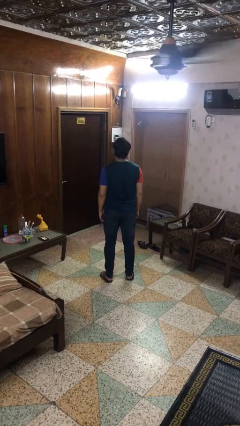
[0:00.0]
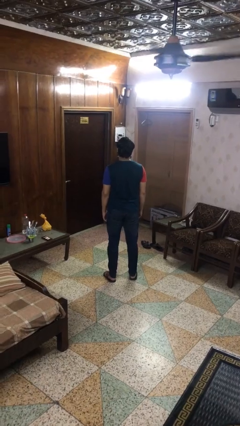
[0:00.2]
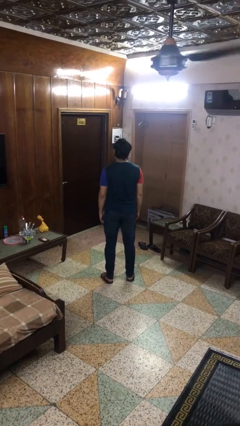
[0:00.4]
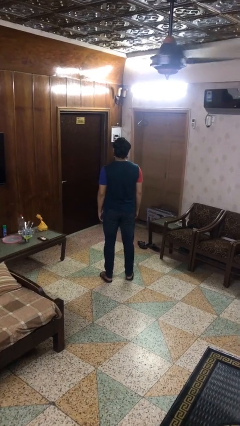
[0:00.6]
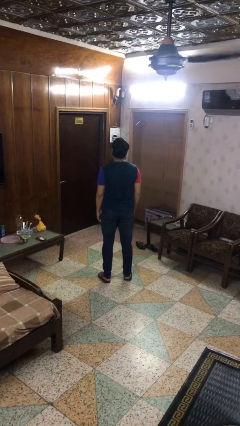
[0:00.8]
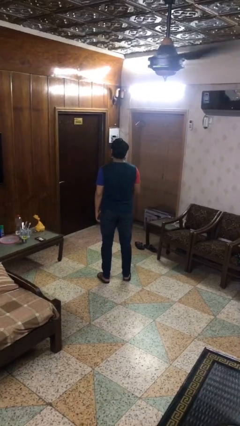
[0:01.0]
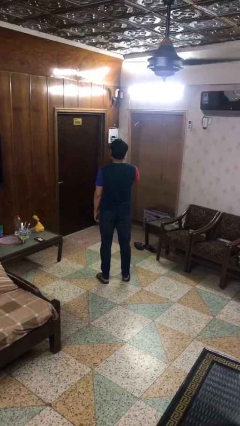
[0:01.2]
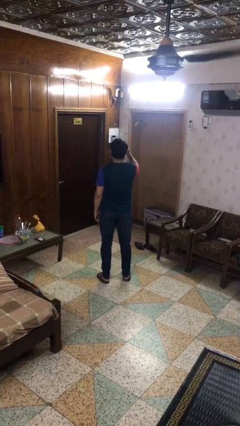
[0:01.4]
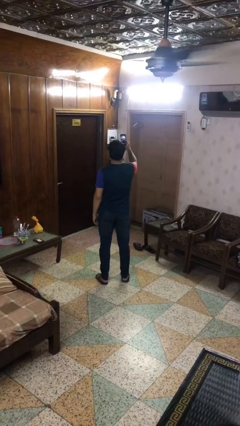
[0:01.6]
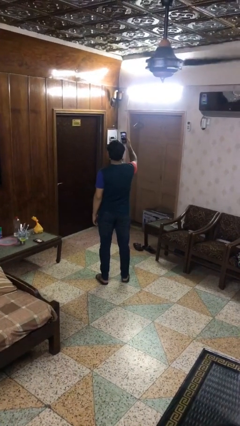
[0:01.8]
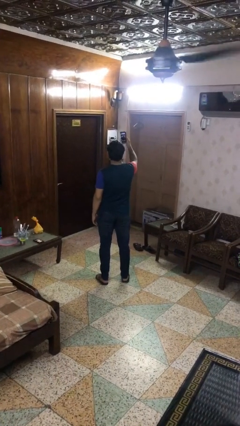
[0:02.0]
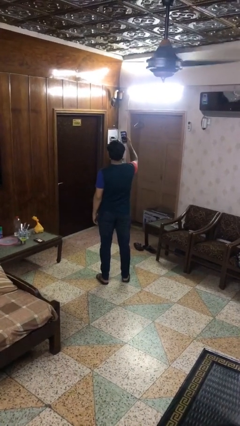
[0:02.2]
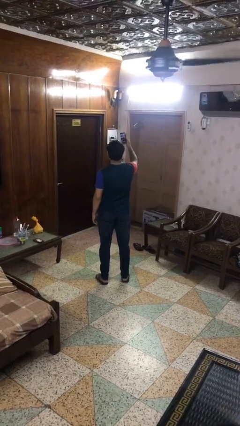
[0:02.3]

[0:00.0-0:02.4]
person takes selfie

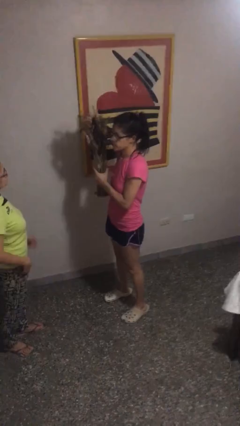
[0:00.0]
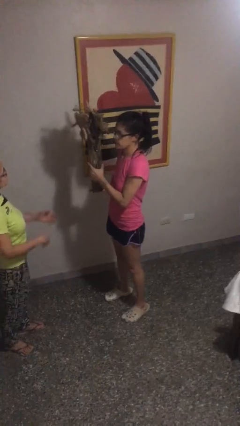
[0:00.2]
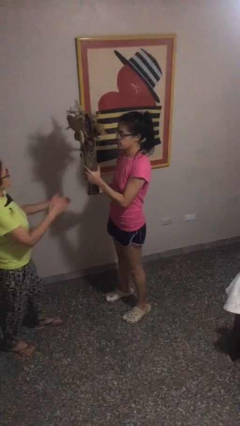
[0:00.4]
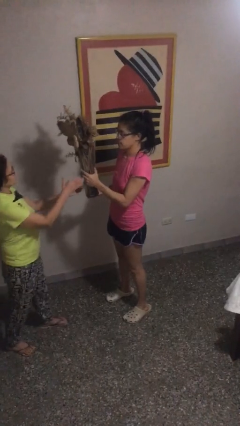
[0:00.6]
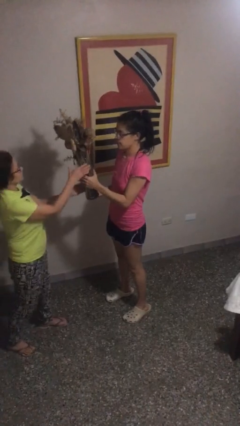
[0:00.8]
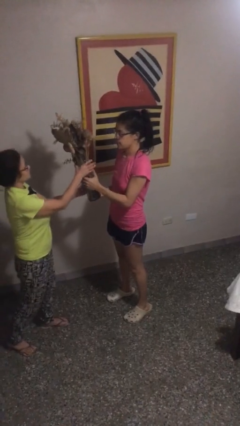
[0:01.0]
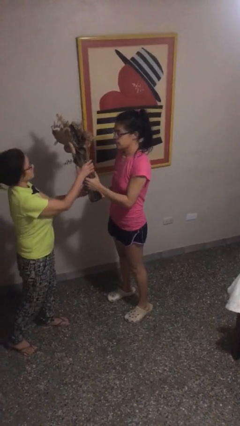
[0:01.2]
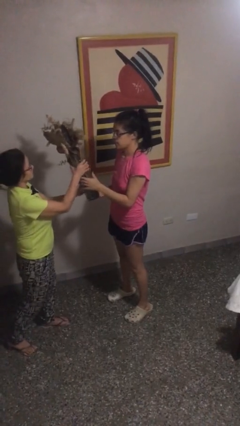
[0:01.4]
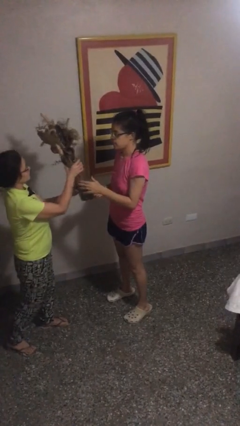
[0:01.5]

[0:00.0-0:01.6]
person transfers object to person

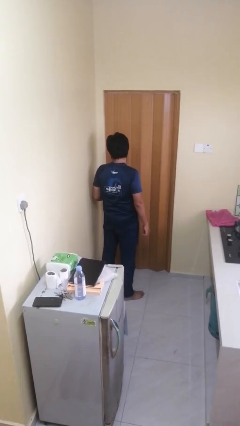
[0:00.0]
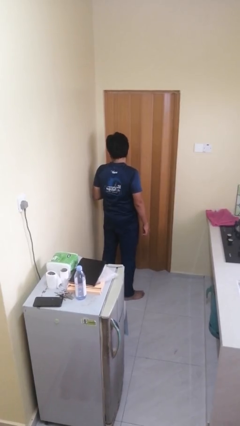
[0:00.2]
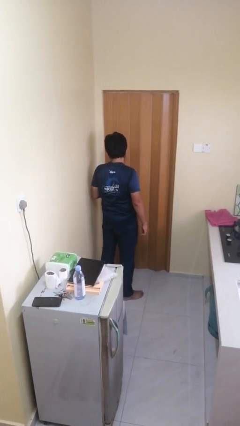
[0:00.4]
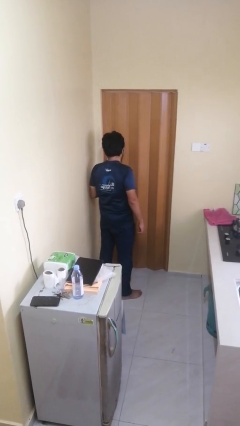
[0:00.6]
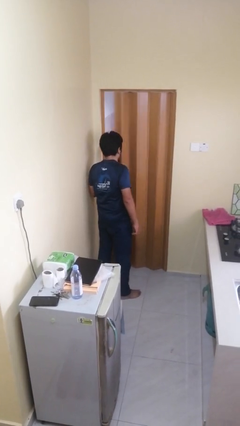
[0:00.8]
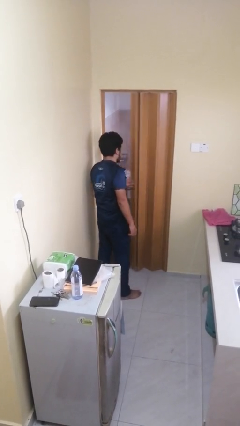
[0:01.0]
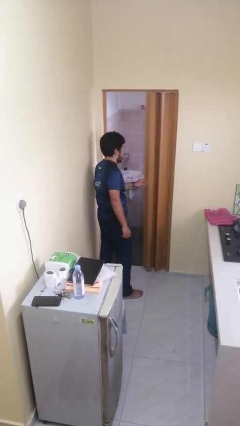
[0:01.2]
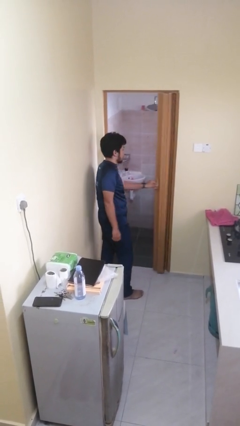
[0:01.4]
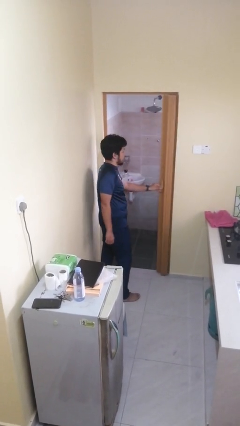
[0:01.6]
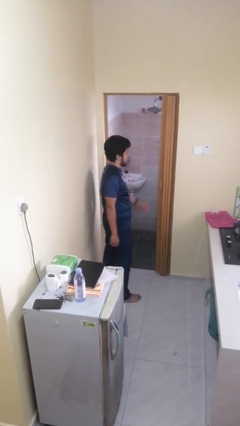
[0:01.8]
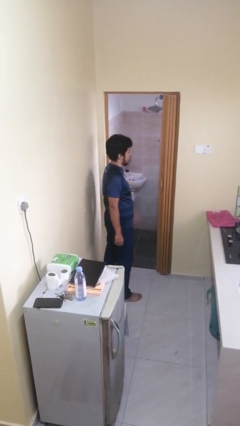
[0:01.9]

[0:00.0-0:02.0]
person opens sliding door

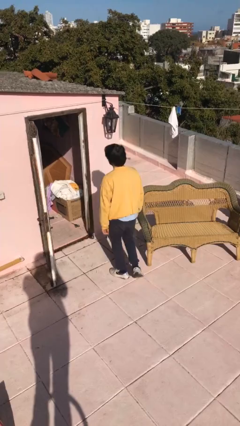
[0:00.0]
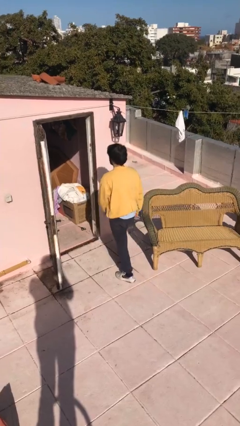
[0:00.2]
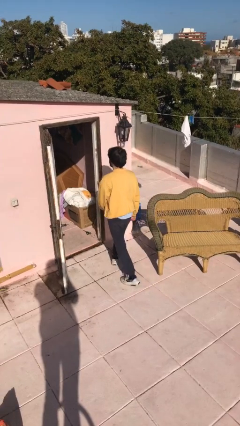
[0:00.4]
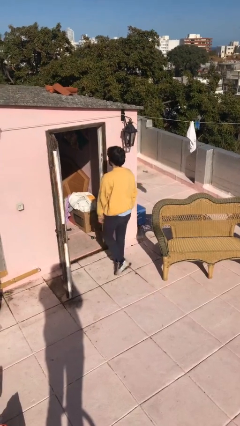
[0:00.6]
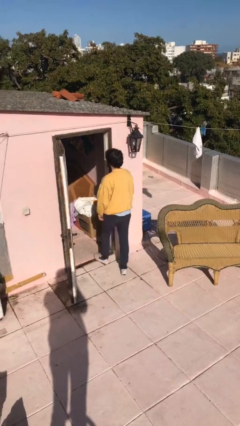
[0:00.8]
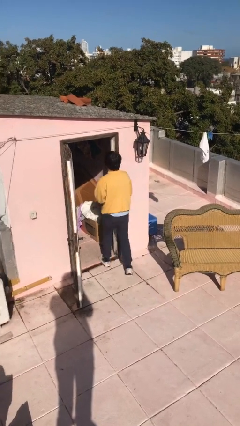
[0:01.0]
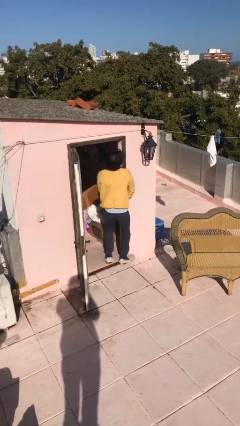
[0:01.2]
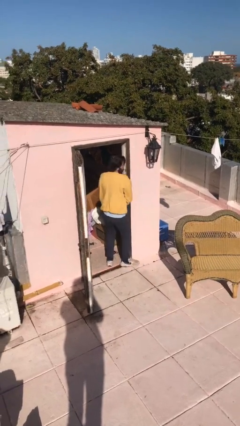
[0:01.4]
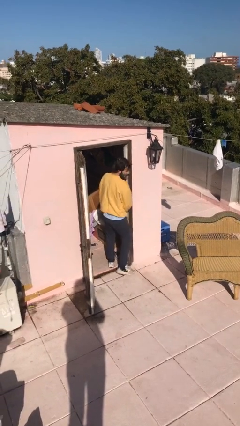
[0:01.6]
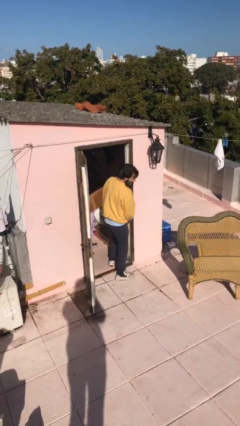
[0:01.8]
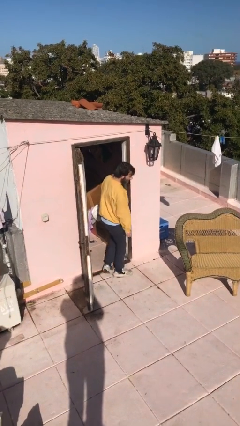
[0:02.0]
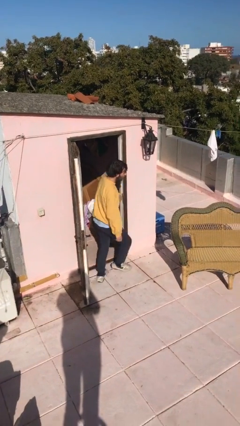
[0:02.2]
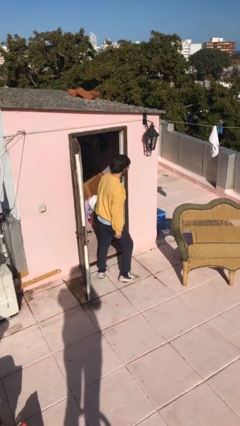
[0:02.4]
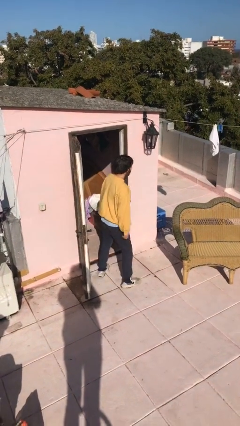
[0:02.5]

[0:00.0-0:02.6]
person bumps into wall

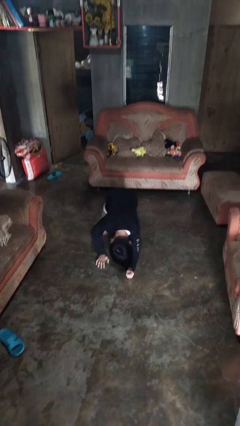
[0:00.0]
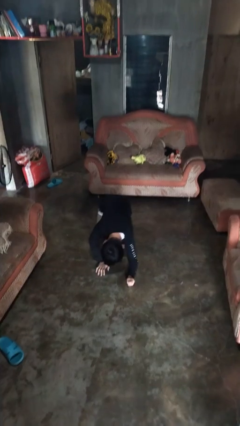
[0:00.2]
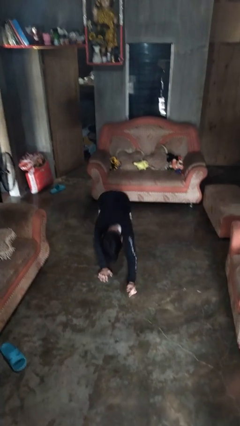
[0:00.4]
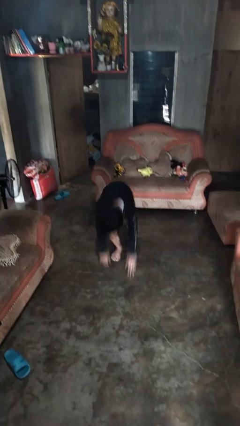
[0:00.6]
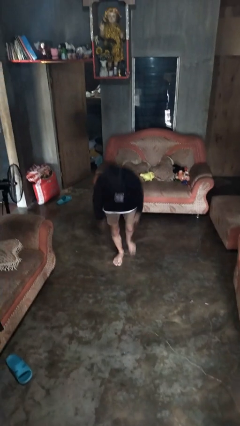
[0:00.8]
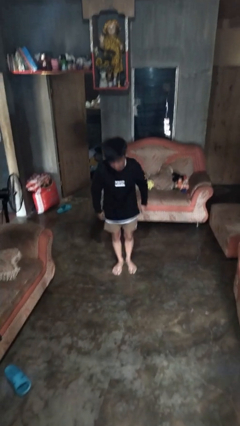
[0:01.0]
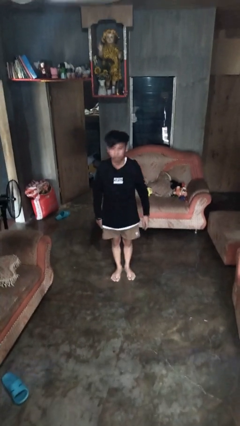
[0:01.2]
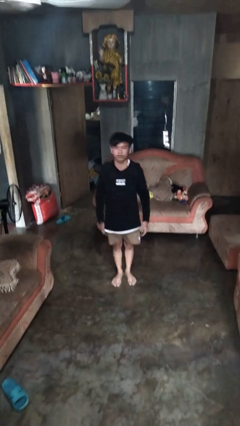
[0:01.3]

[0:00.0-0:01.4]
person stands up from floor

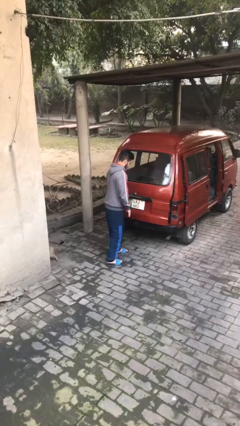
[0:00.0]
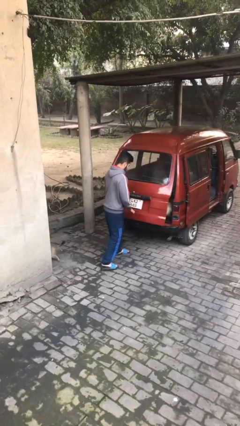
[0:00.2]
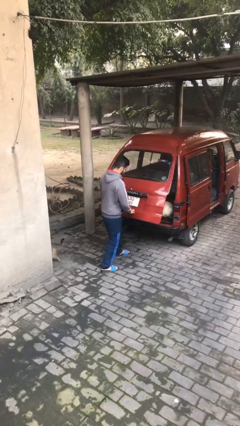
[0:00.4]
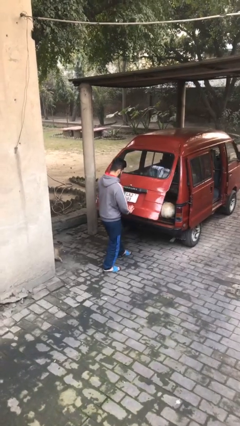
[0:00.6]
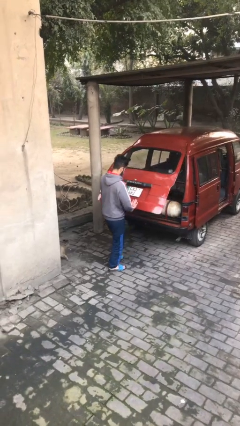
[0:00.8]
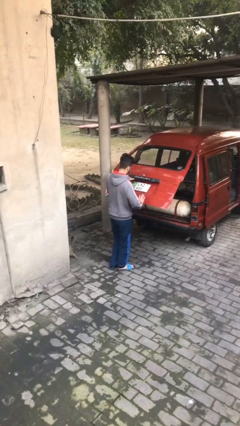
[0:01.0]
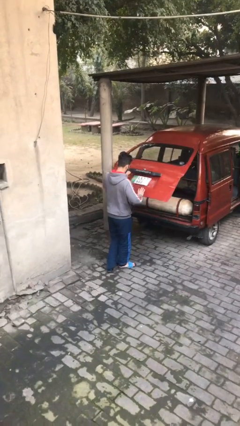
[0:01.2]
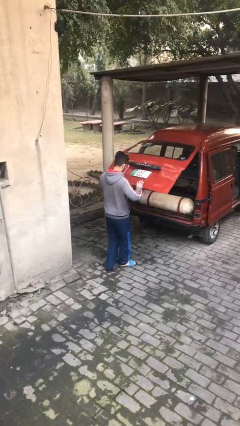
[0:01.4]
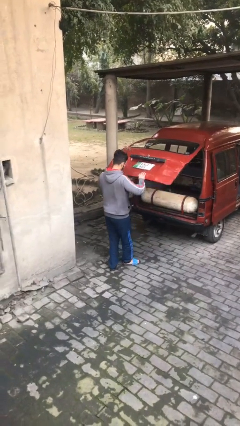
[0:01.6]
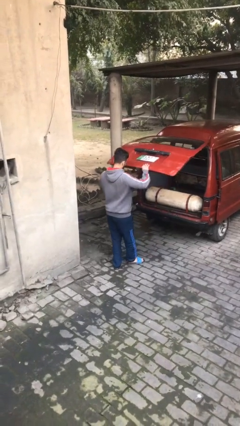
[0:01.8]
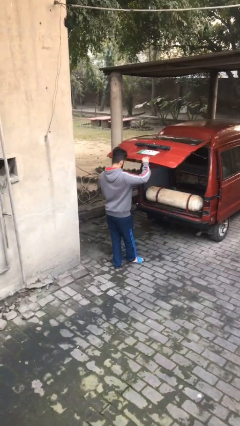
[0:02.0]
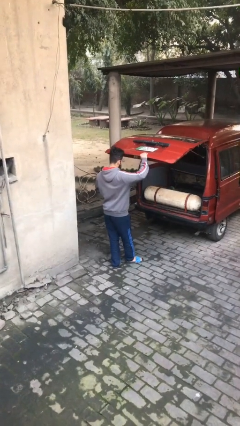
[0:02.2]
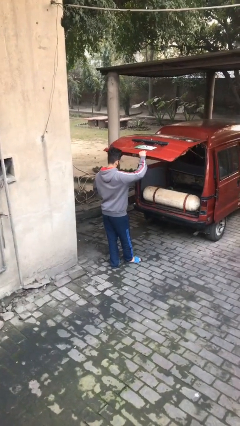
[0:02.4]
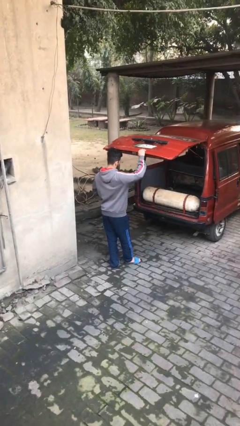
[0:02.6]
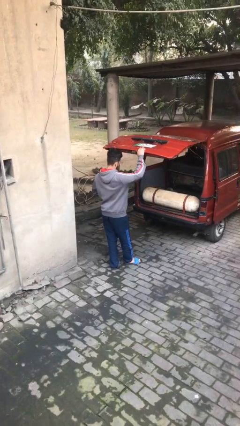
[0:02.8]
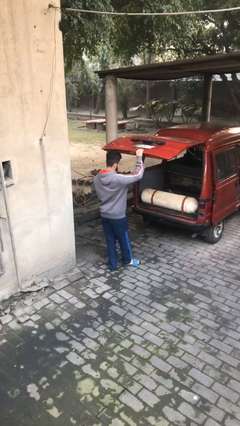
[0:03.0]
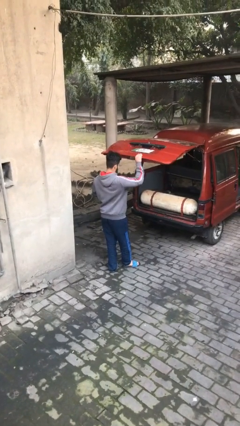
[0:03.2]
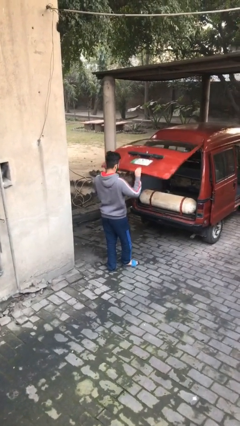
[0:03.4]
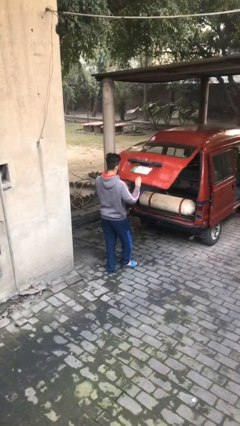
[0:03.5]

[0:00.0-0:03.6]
person opens car trunk

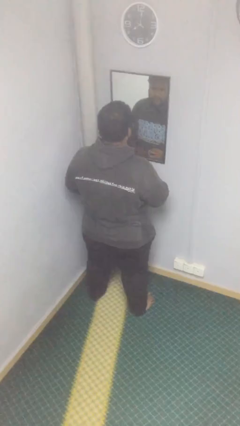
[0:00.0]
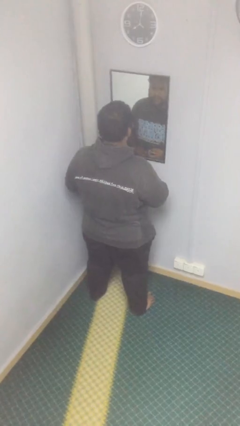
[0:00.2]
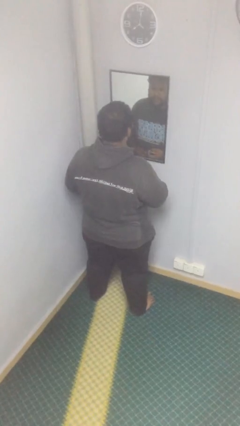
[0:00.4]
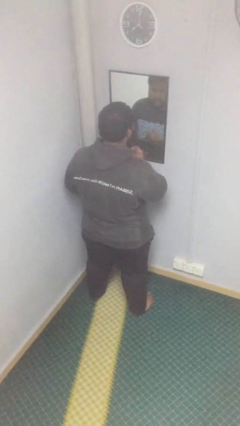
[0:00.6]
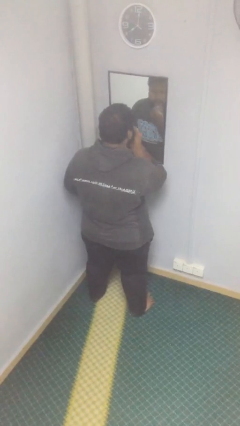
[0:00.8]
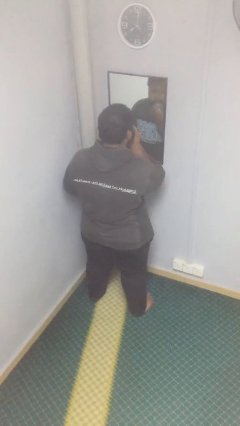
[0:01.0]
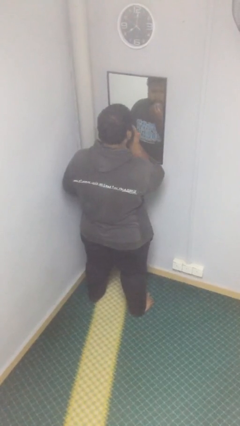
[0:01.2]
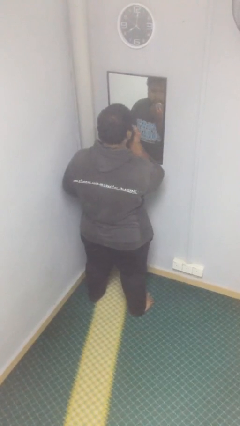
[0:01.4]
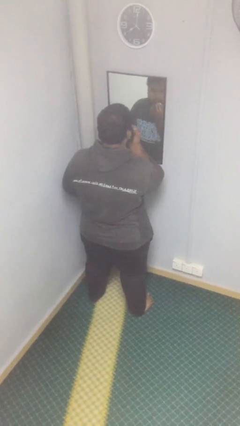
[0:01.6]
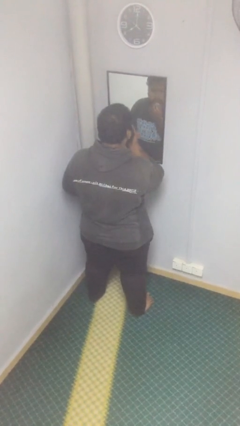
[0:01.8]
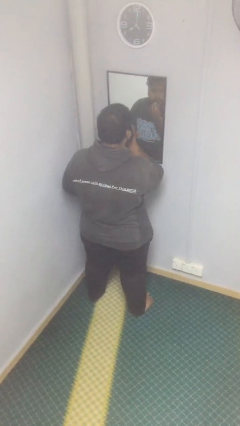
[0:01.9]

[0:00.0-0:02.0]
person applies lip makeup

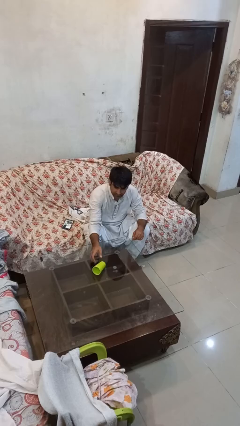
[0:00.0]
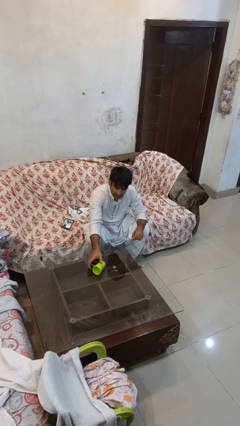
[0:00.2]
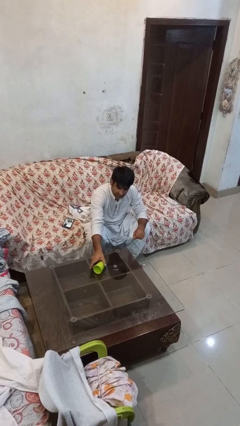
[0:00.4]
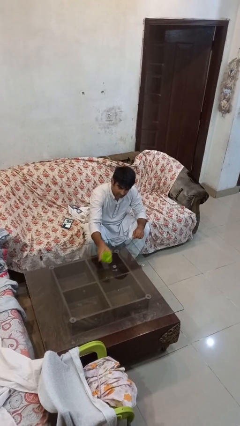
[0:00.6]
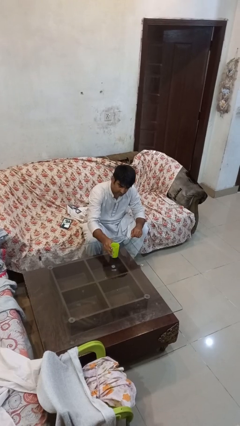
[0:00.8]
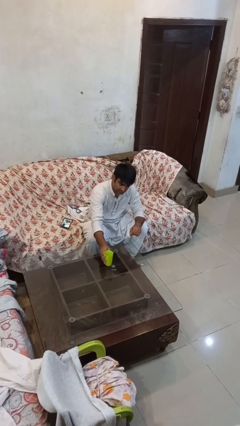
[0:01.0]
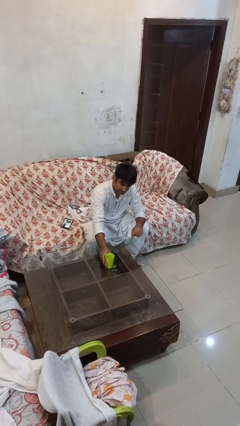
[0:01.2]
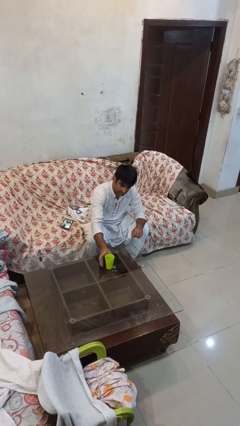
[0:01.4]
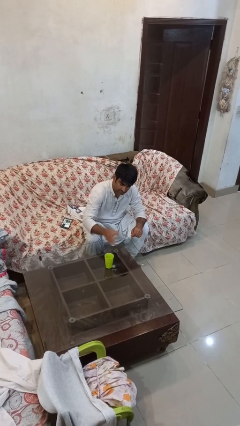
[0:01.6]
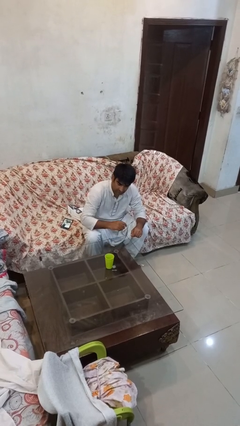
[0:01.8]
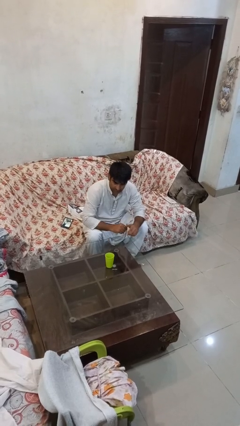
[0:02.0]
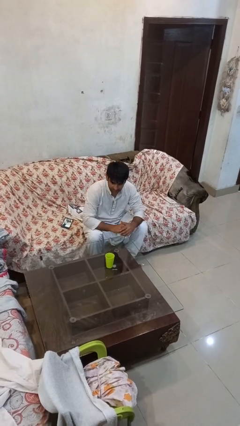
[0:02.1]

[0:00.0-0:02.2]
person sets upright glass
